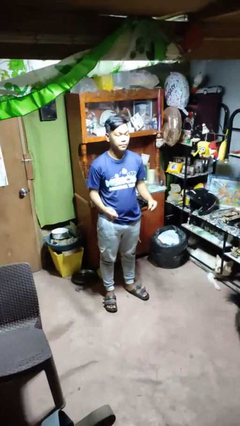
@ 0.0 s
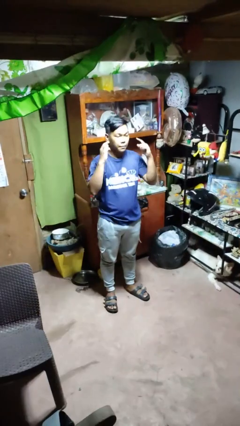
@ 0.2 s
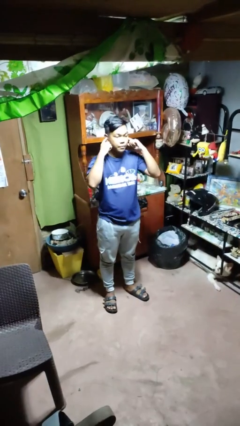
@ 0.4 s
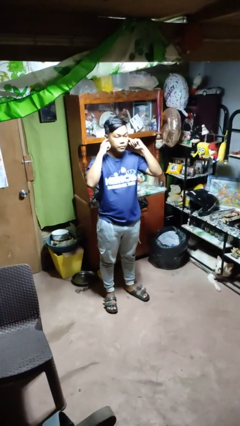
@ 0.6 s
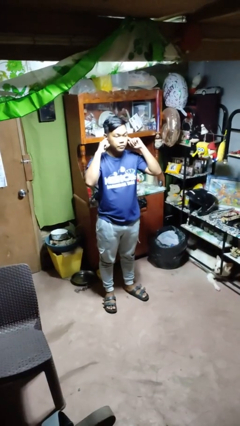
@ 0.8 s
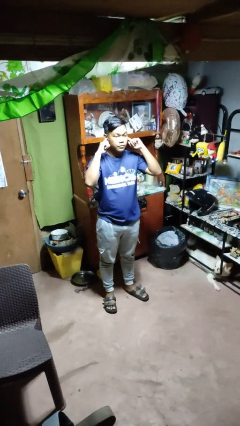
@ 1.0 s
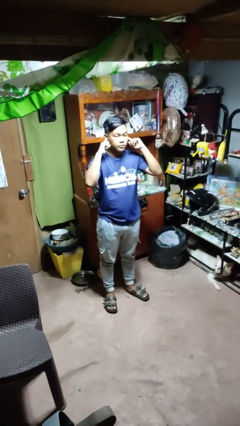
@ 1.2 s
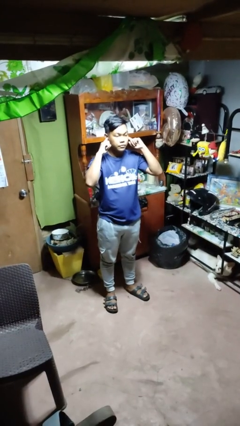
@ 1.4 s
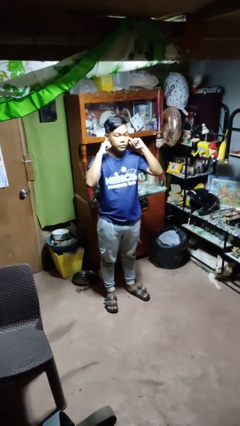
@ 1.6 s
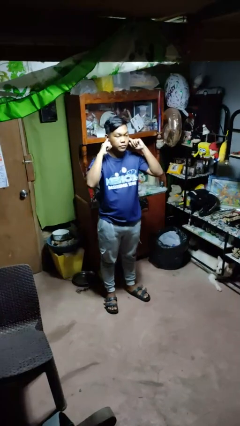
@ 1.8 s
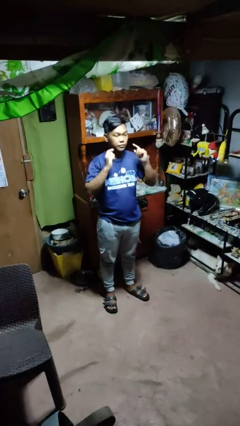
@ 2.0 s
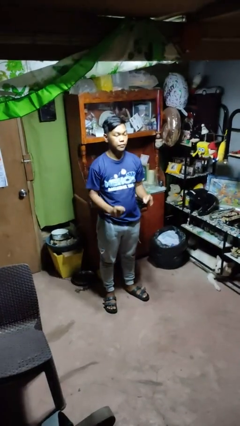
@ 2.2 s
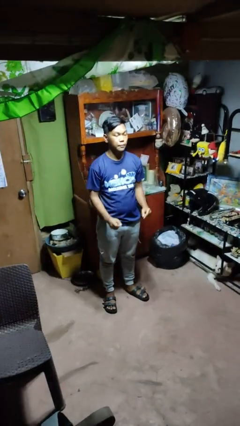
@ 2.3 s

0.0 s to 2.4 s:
person puts fingers in ear

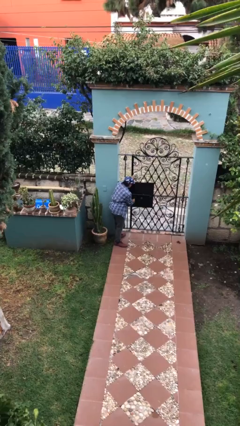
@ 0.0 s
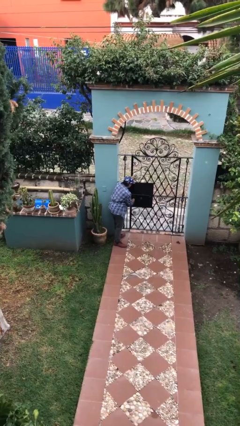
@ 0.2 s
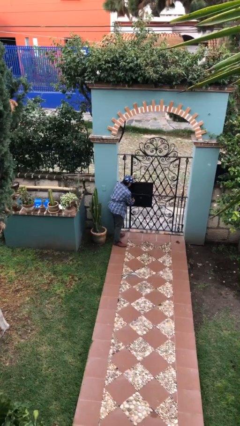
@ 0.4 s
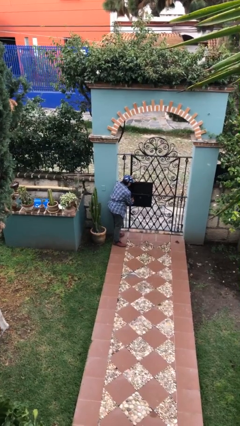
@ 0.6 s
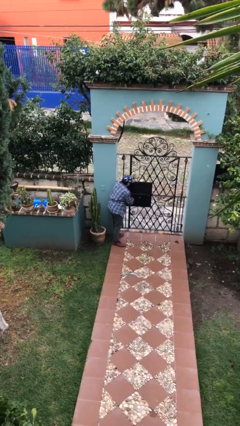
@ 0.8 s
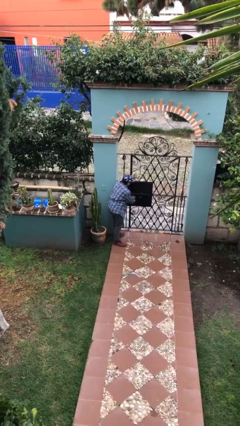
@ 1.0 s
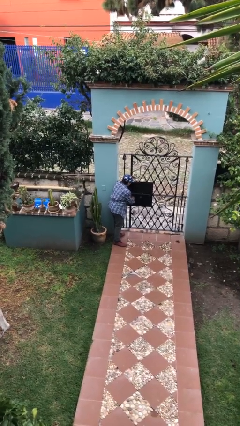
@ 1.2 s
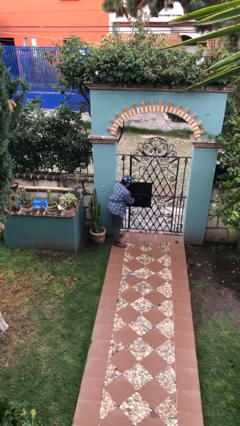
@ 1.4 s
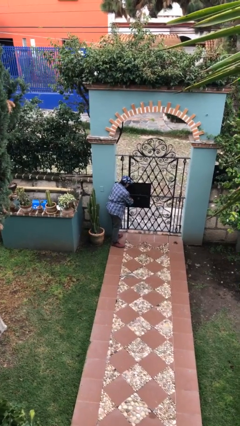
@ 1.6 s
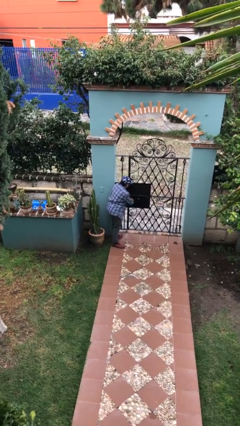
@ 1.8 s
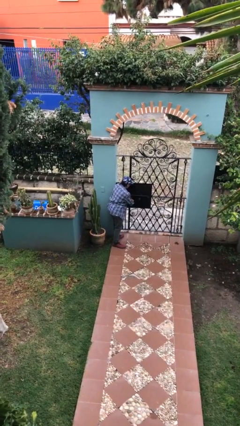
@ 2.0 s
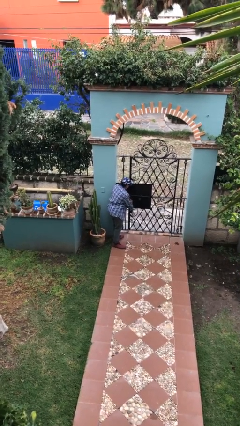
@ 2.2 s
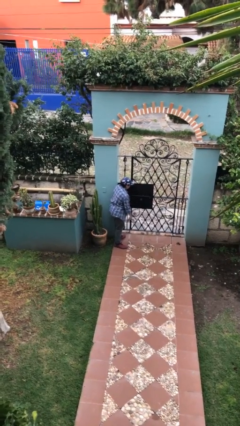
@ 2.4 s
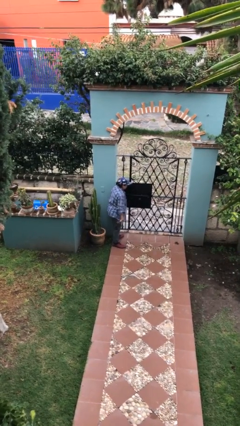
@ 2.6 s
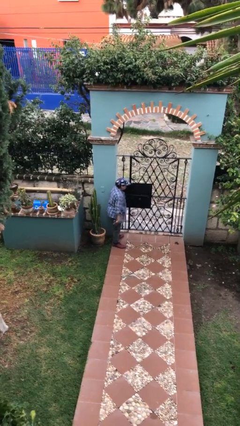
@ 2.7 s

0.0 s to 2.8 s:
person locks door with keys

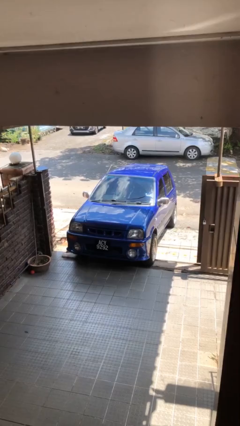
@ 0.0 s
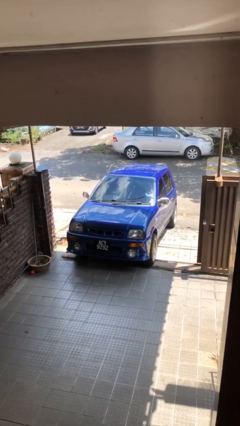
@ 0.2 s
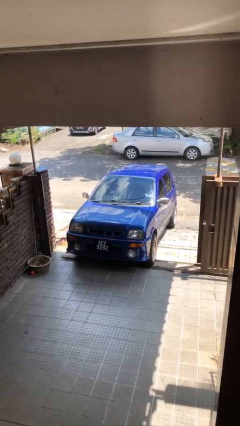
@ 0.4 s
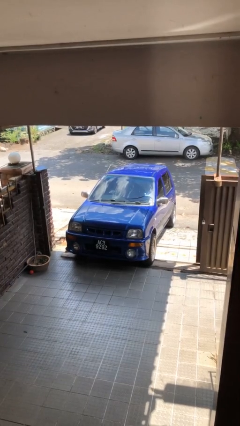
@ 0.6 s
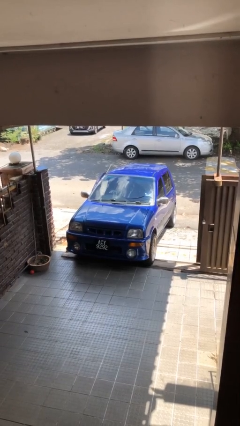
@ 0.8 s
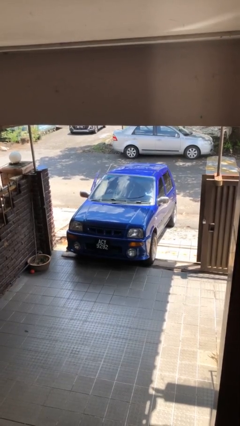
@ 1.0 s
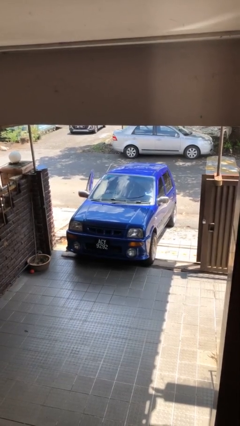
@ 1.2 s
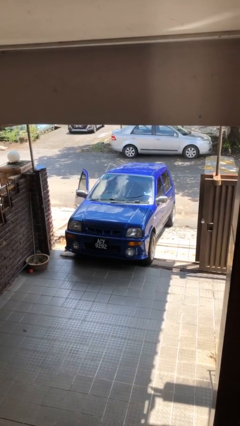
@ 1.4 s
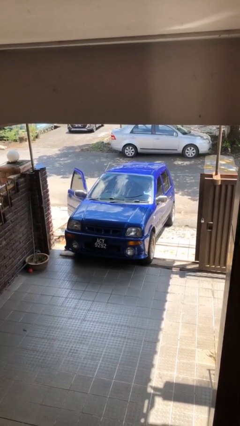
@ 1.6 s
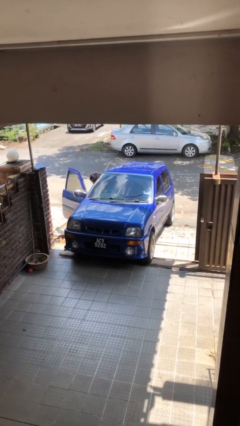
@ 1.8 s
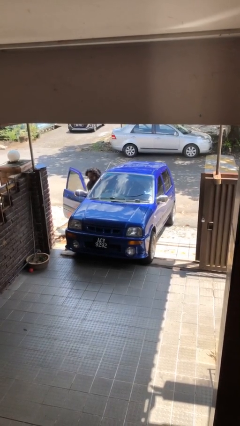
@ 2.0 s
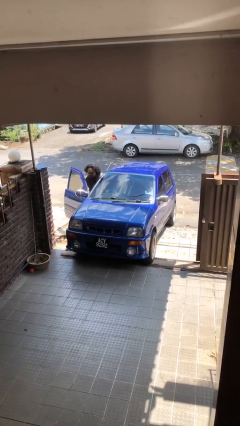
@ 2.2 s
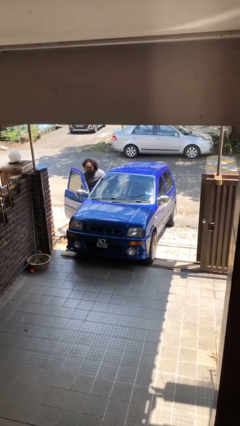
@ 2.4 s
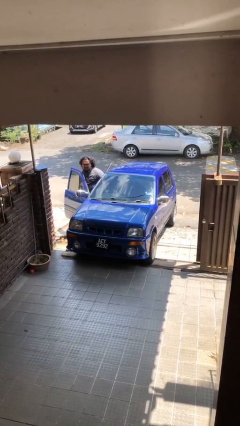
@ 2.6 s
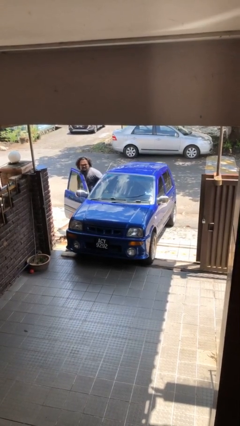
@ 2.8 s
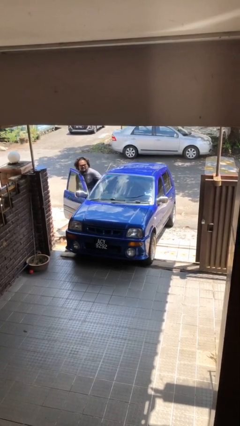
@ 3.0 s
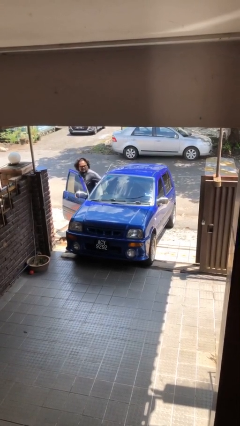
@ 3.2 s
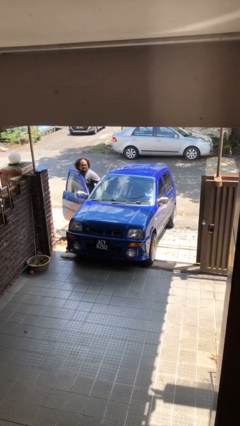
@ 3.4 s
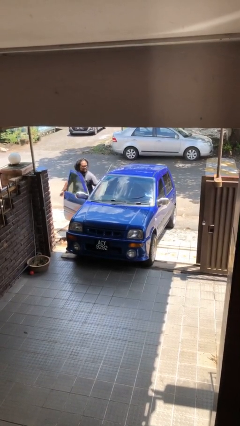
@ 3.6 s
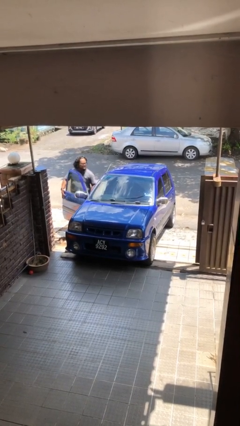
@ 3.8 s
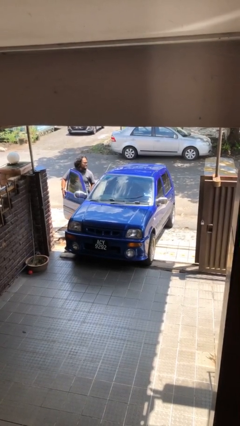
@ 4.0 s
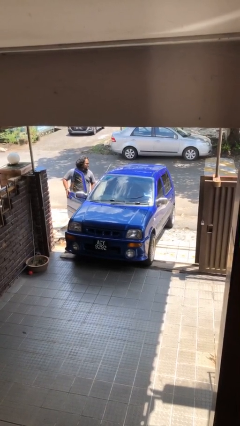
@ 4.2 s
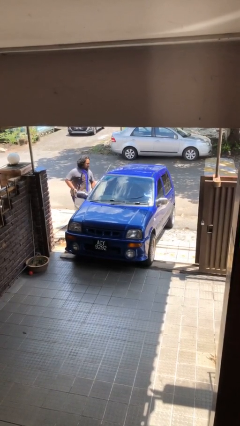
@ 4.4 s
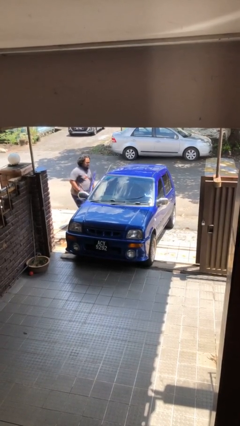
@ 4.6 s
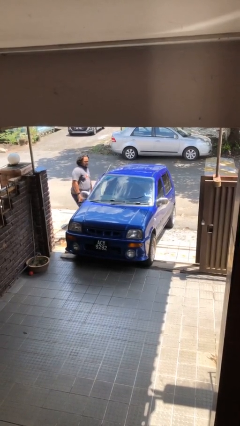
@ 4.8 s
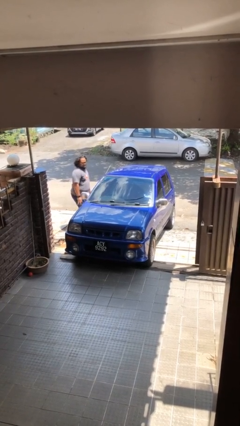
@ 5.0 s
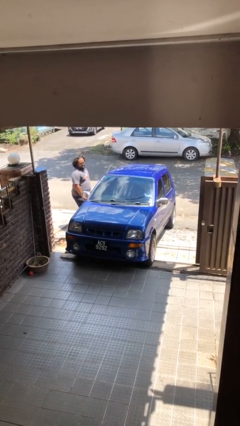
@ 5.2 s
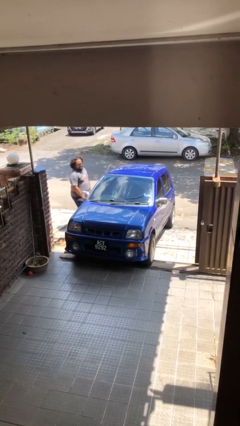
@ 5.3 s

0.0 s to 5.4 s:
car drops off person

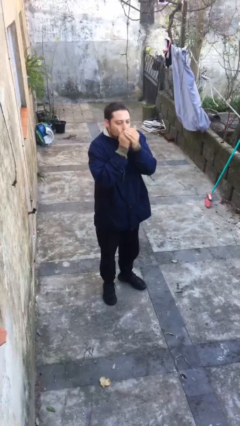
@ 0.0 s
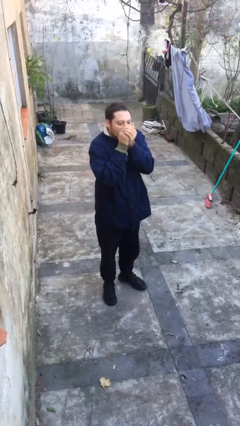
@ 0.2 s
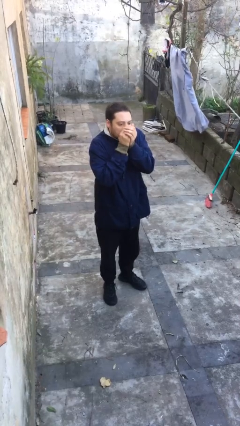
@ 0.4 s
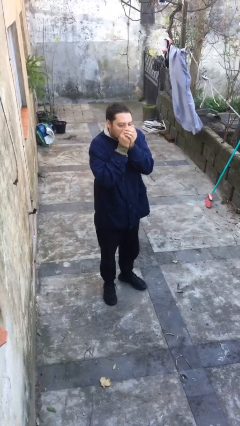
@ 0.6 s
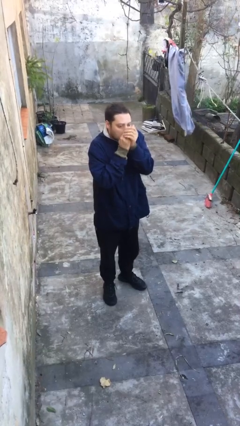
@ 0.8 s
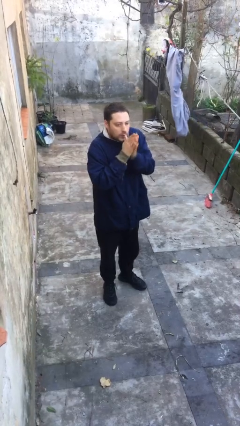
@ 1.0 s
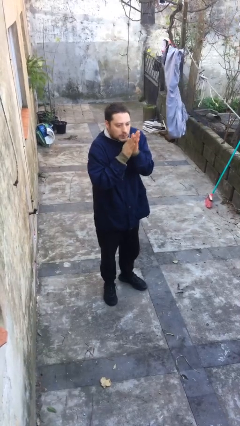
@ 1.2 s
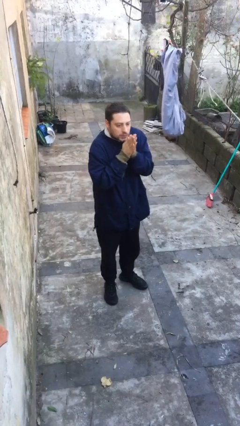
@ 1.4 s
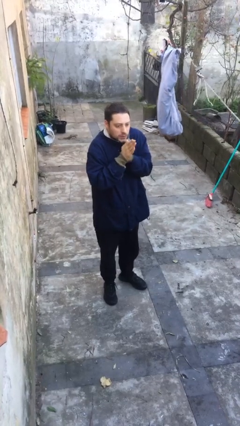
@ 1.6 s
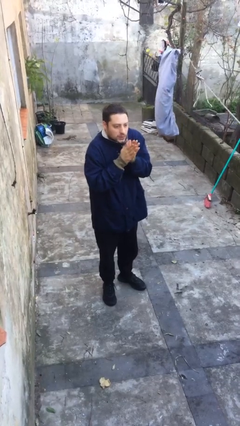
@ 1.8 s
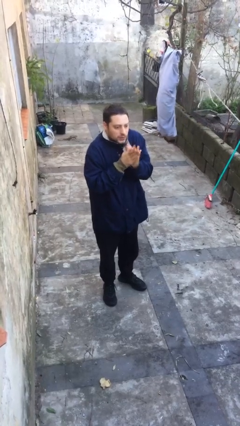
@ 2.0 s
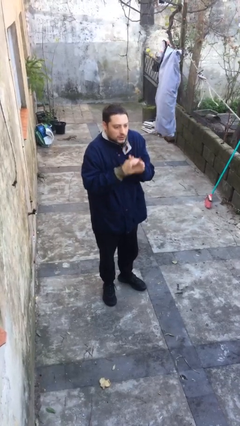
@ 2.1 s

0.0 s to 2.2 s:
person blows into hands

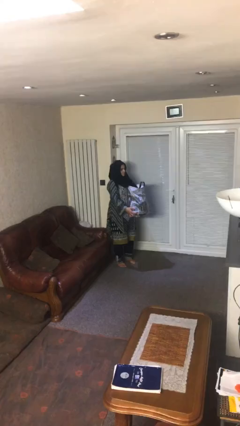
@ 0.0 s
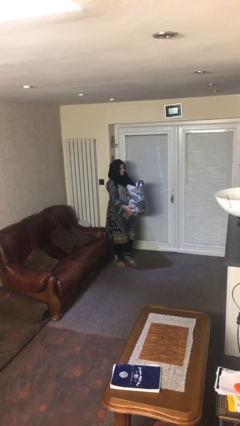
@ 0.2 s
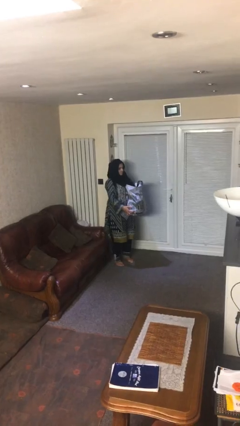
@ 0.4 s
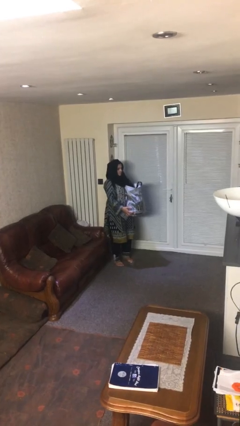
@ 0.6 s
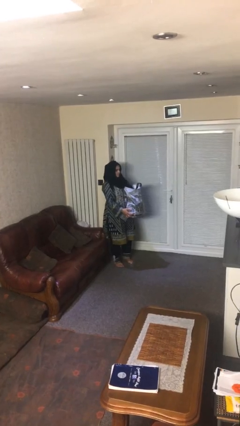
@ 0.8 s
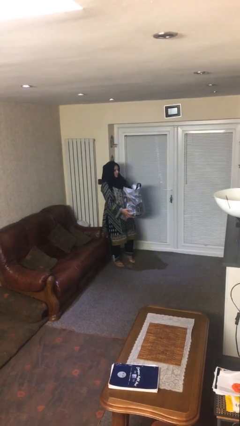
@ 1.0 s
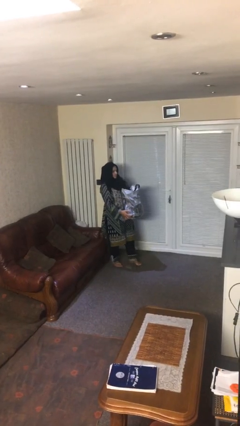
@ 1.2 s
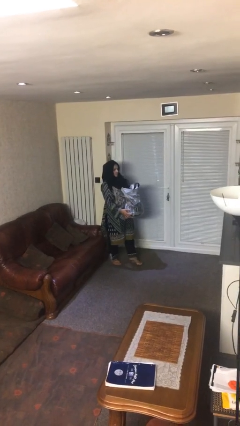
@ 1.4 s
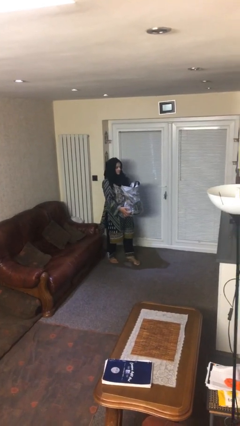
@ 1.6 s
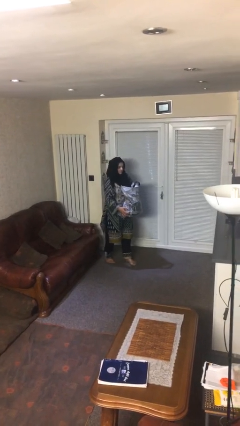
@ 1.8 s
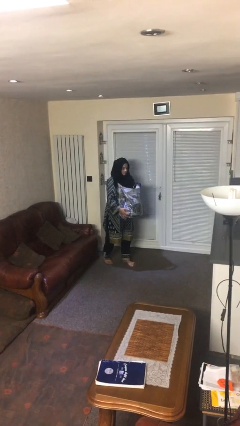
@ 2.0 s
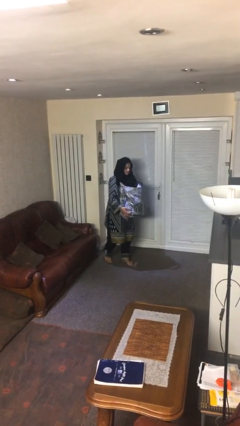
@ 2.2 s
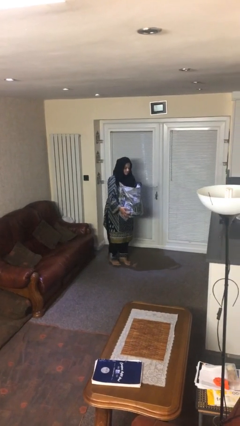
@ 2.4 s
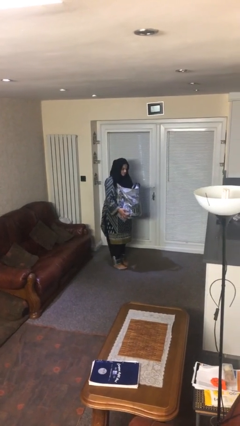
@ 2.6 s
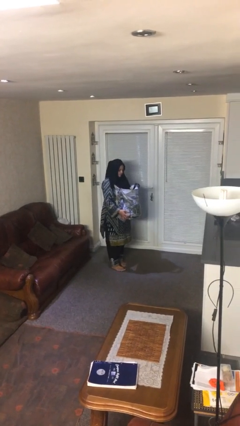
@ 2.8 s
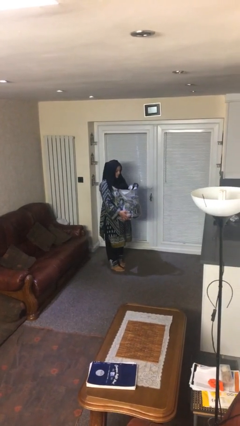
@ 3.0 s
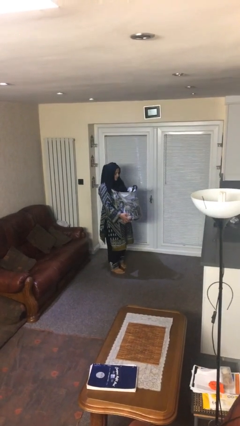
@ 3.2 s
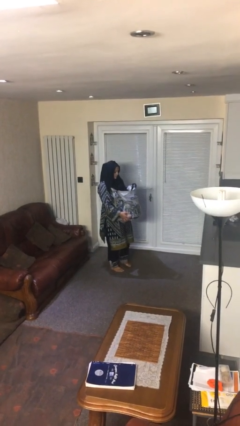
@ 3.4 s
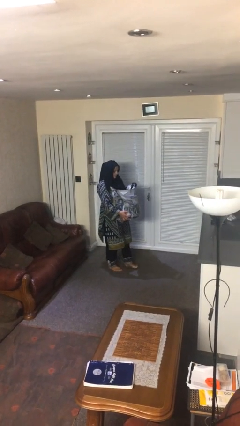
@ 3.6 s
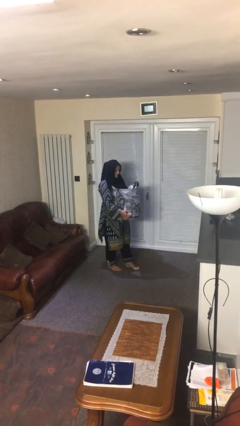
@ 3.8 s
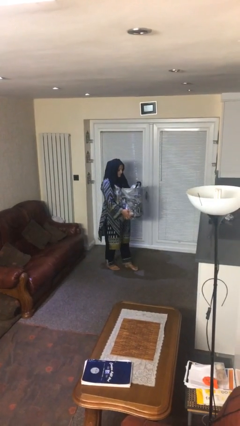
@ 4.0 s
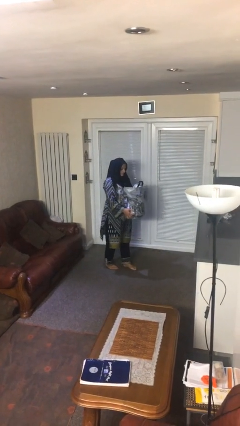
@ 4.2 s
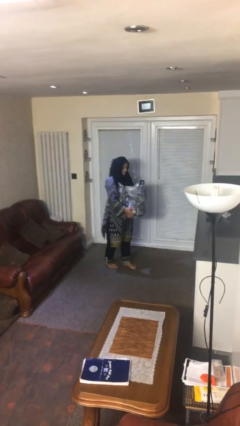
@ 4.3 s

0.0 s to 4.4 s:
person carries heavy object
